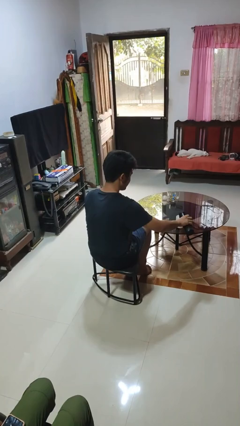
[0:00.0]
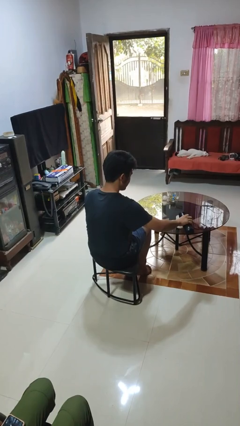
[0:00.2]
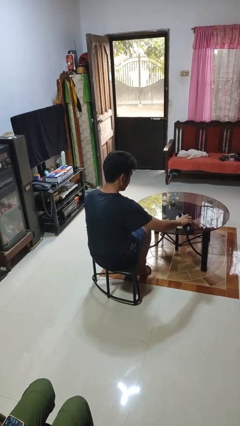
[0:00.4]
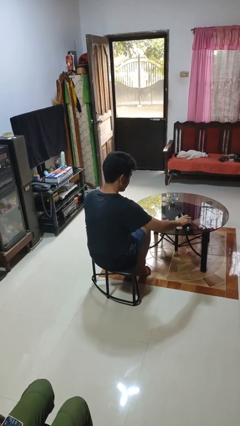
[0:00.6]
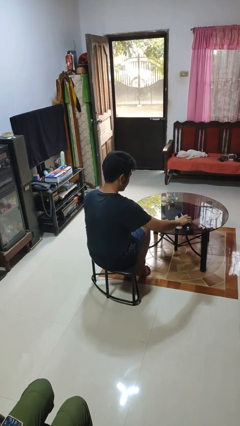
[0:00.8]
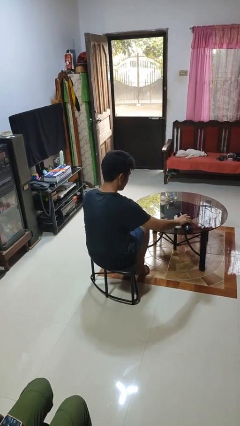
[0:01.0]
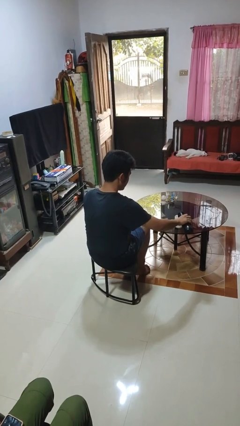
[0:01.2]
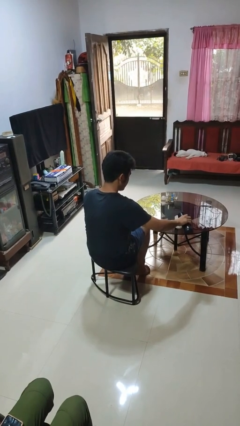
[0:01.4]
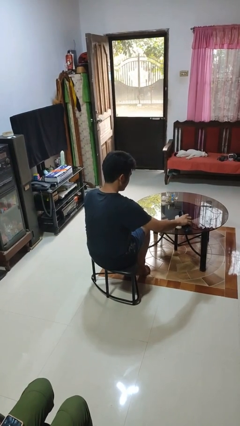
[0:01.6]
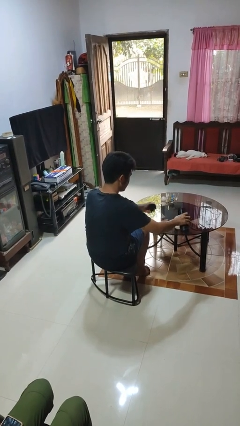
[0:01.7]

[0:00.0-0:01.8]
person pours liquid into cup

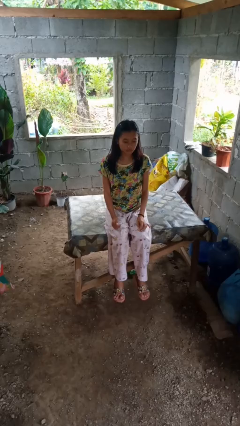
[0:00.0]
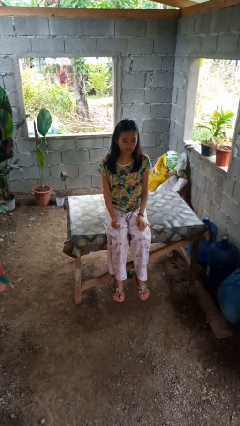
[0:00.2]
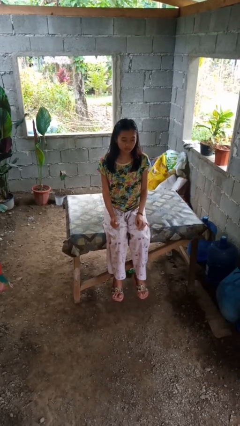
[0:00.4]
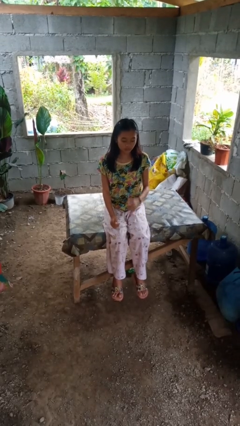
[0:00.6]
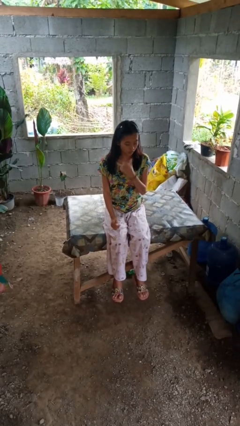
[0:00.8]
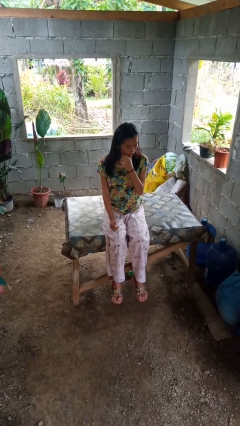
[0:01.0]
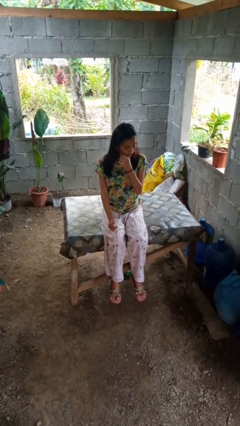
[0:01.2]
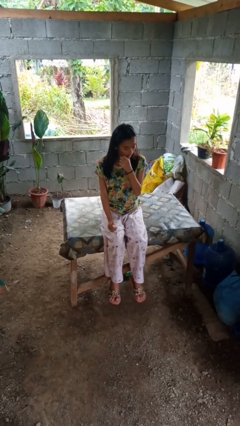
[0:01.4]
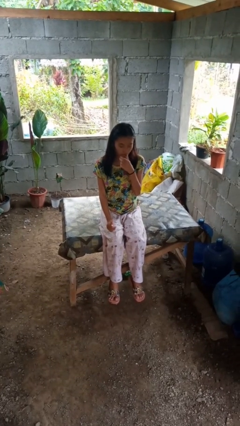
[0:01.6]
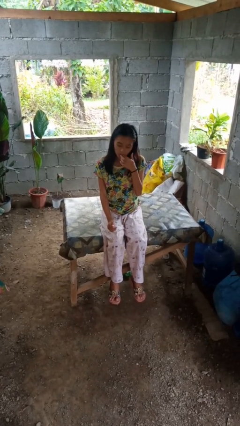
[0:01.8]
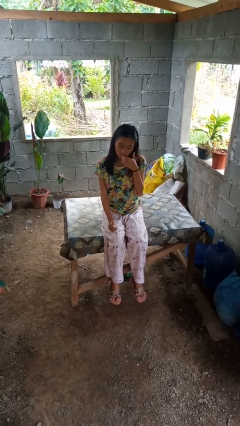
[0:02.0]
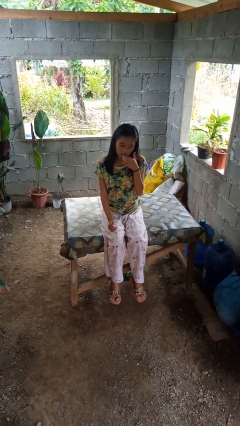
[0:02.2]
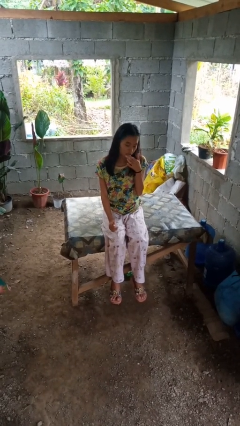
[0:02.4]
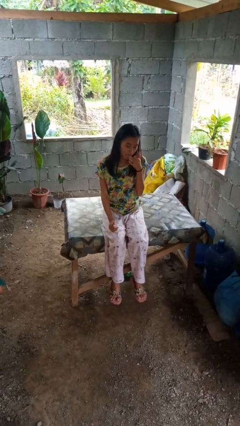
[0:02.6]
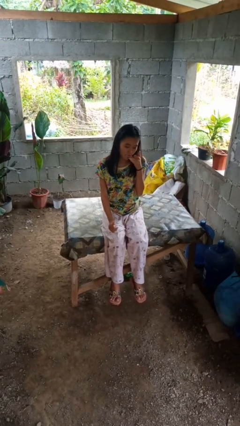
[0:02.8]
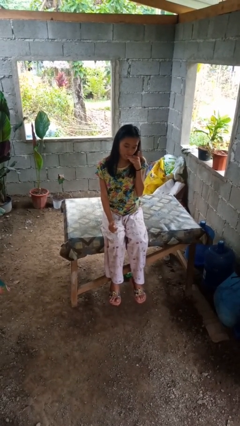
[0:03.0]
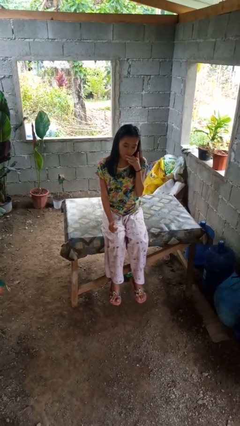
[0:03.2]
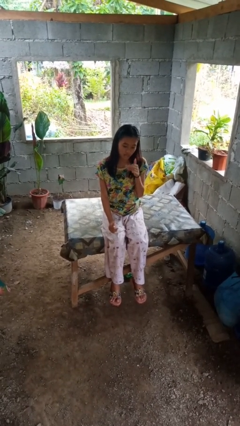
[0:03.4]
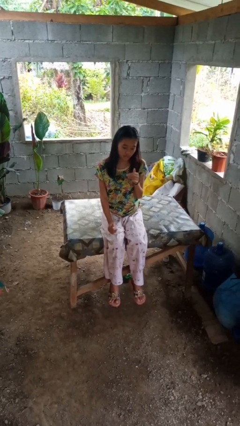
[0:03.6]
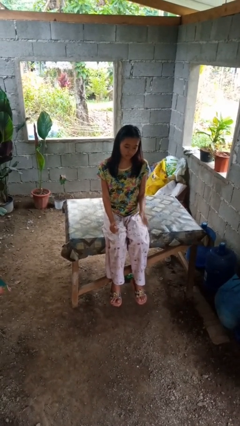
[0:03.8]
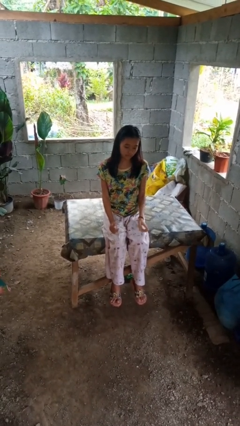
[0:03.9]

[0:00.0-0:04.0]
person licks fingers

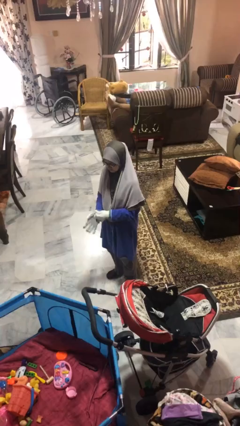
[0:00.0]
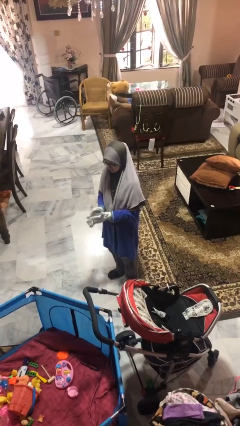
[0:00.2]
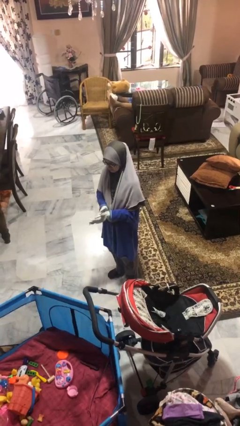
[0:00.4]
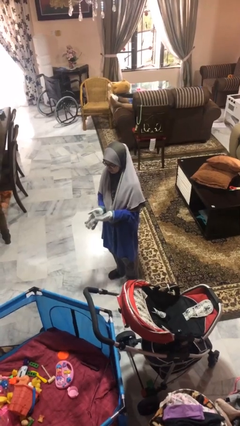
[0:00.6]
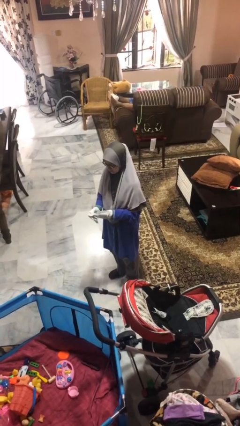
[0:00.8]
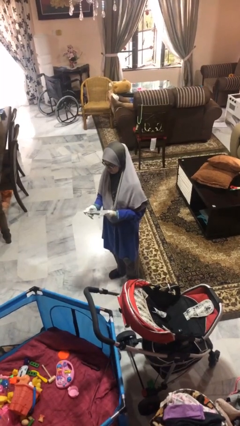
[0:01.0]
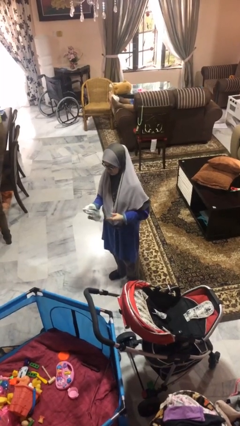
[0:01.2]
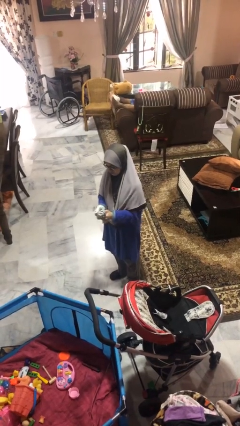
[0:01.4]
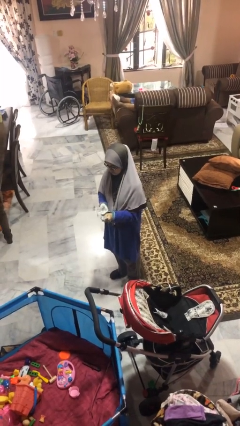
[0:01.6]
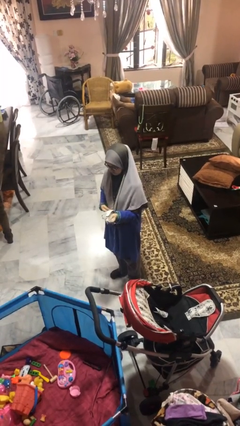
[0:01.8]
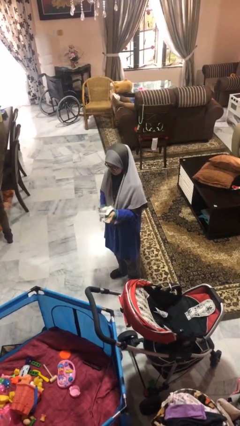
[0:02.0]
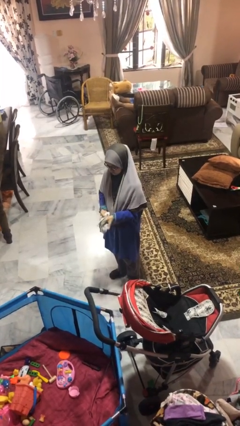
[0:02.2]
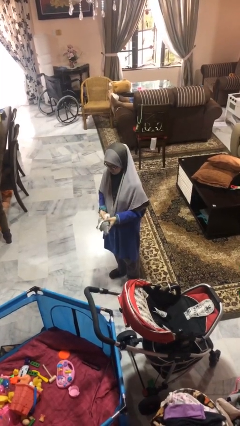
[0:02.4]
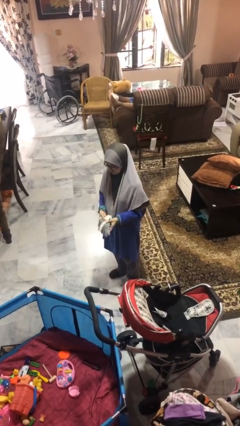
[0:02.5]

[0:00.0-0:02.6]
person takes off gloves

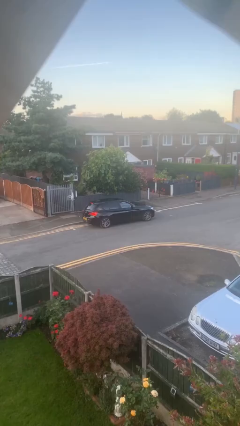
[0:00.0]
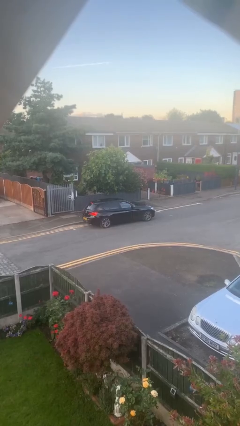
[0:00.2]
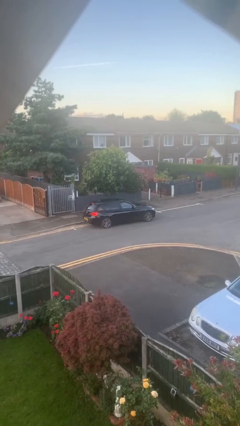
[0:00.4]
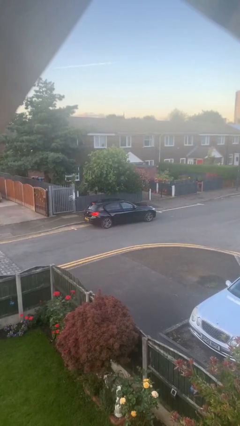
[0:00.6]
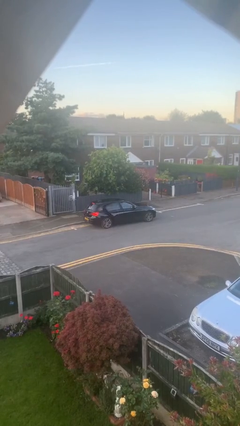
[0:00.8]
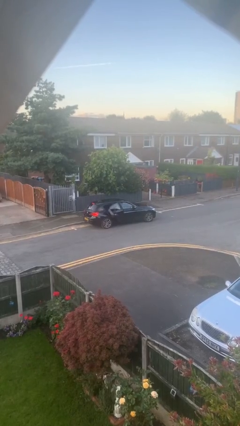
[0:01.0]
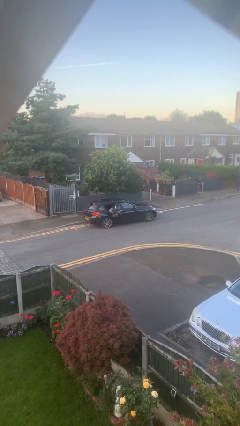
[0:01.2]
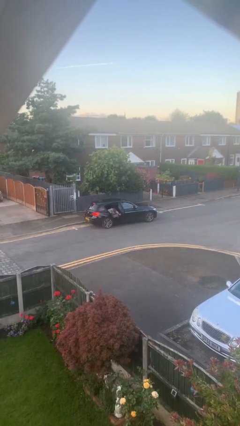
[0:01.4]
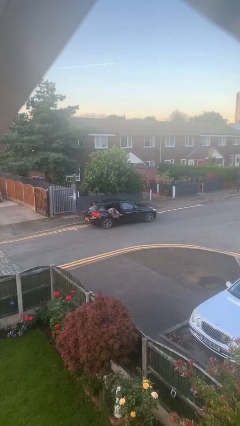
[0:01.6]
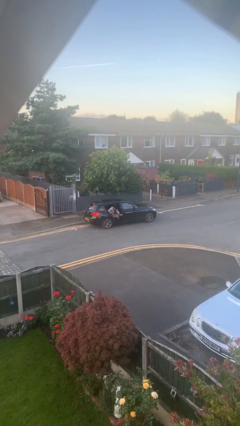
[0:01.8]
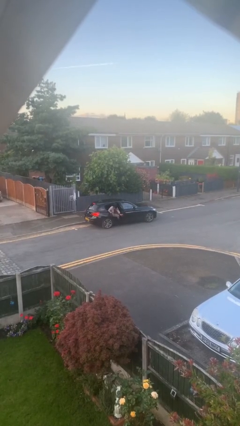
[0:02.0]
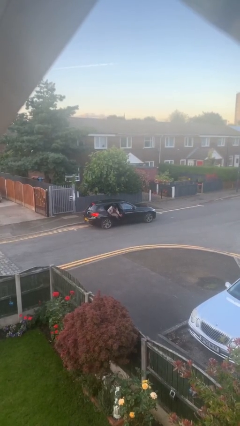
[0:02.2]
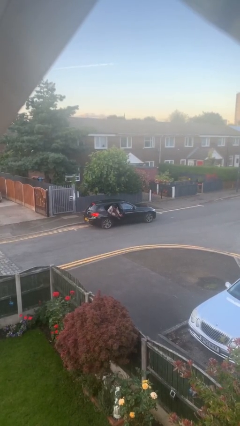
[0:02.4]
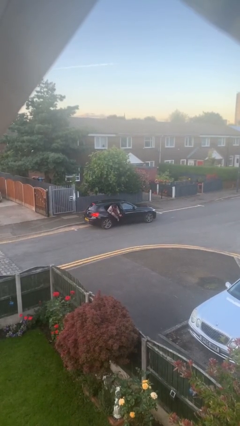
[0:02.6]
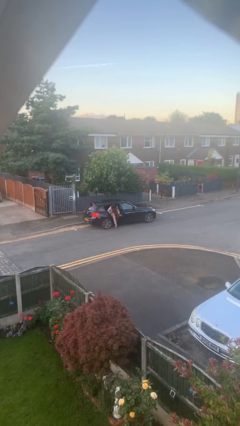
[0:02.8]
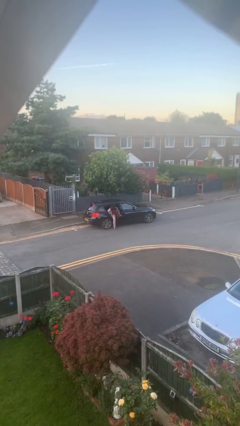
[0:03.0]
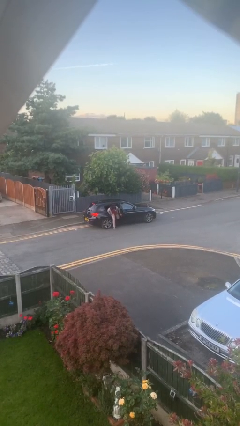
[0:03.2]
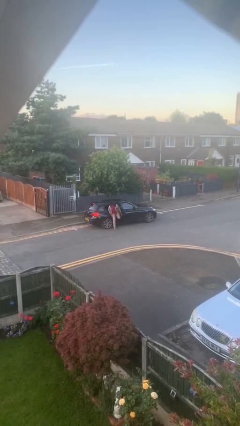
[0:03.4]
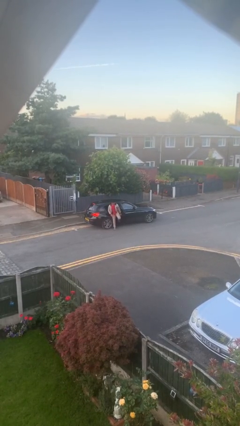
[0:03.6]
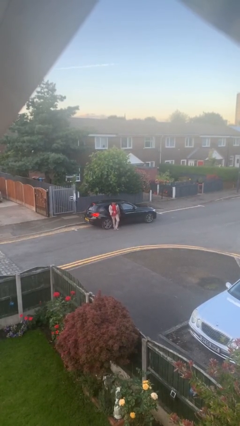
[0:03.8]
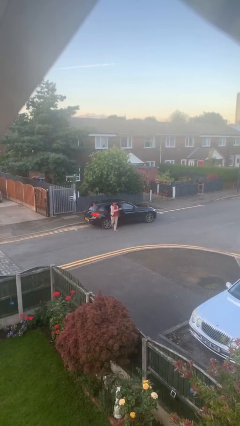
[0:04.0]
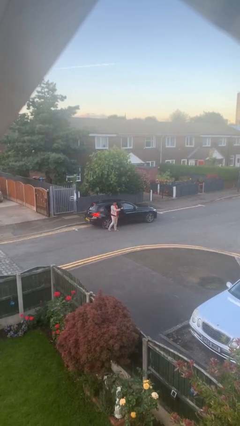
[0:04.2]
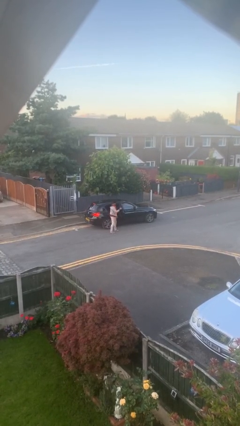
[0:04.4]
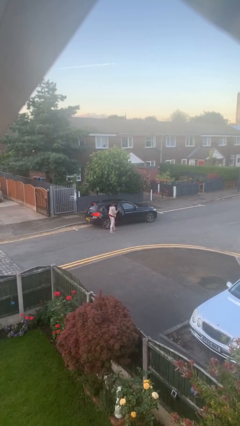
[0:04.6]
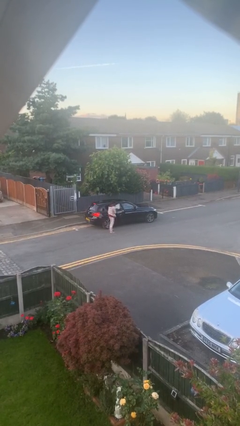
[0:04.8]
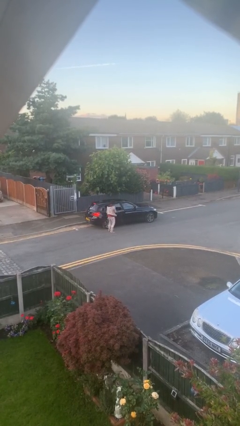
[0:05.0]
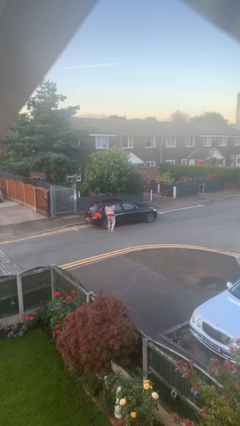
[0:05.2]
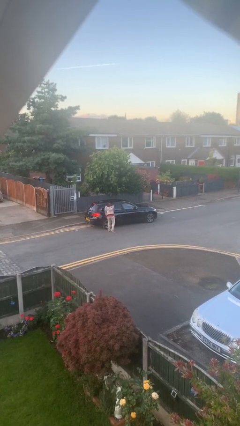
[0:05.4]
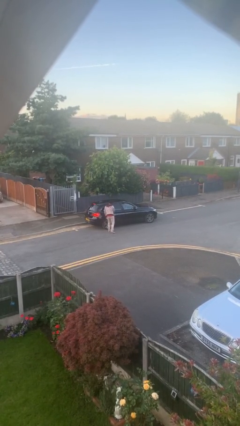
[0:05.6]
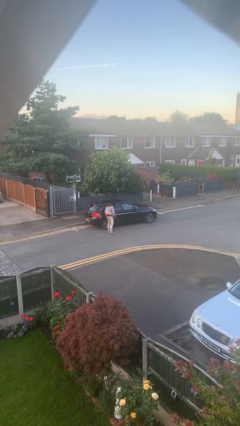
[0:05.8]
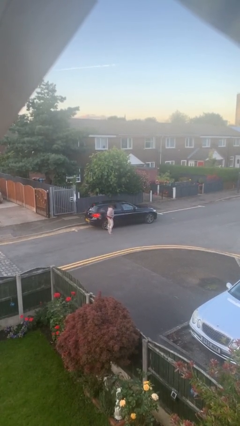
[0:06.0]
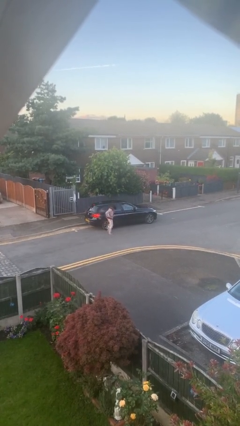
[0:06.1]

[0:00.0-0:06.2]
car drops off person

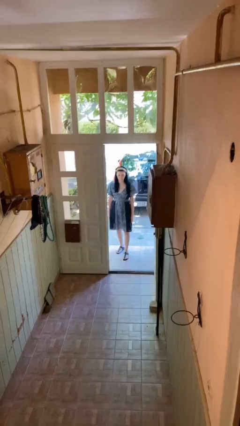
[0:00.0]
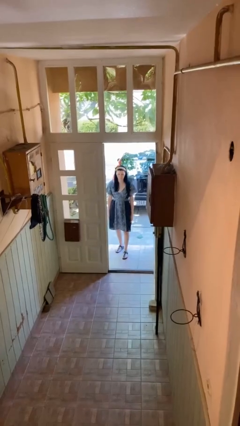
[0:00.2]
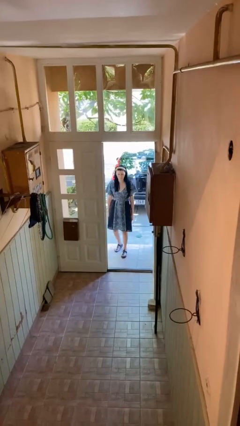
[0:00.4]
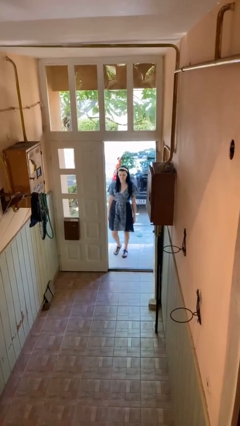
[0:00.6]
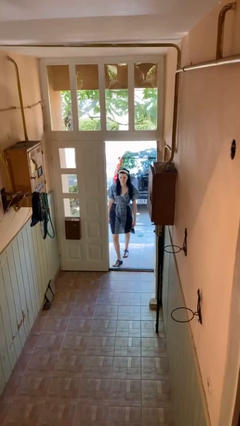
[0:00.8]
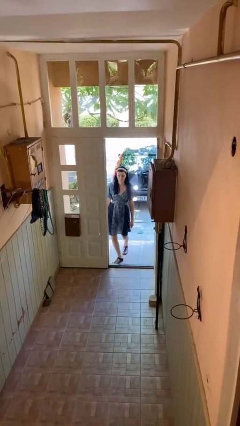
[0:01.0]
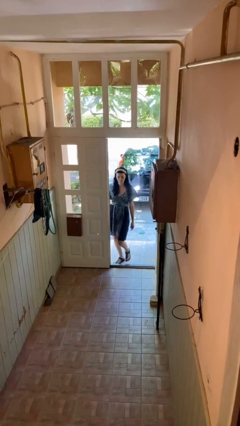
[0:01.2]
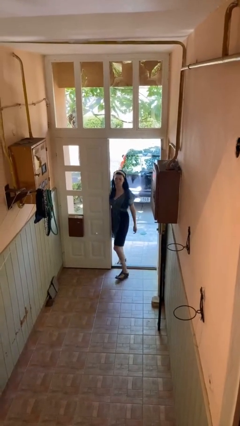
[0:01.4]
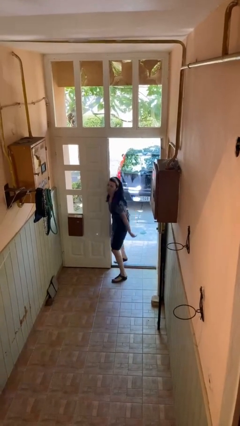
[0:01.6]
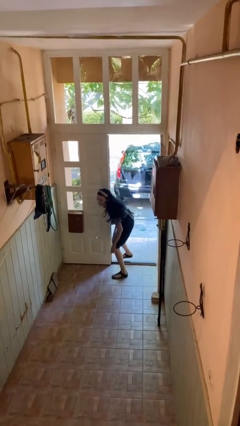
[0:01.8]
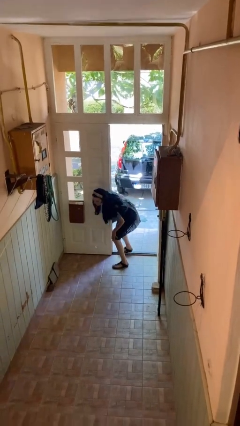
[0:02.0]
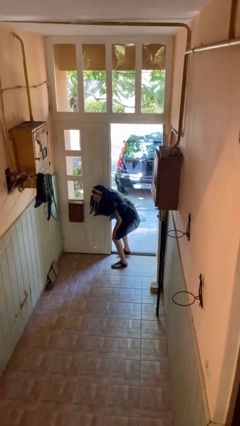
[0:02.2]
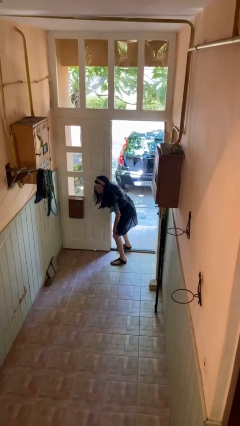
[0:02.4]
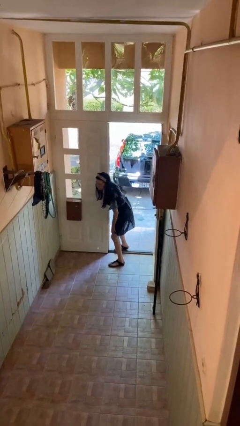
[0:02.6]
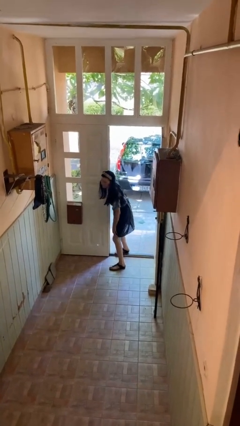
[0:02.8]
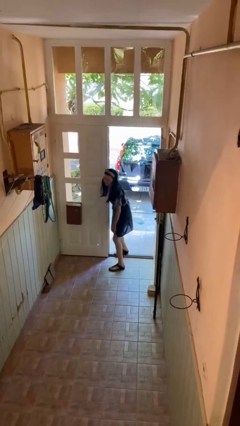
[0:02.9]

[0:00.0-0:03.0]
person bumps into wall

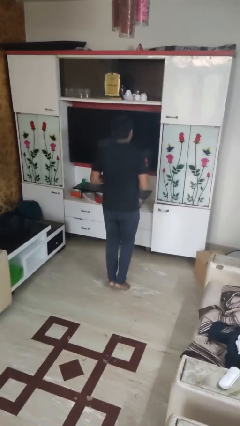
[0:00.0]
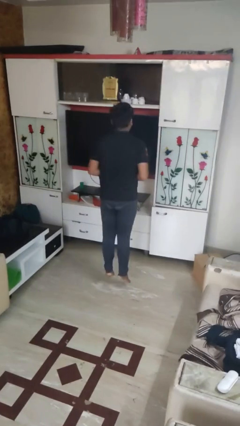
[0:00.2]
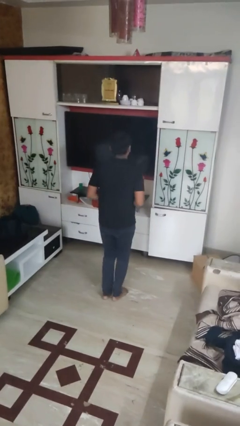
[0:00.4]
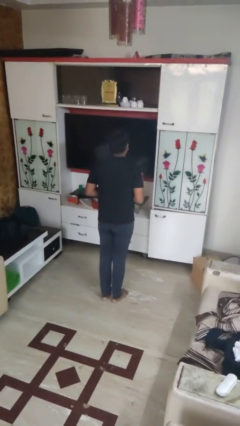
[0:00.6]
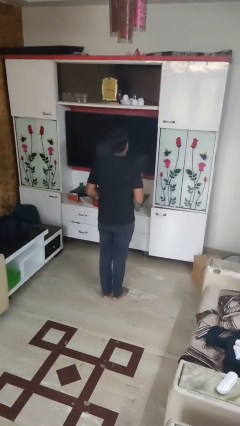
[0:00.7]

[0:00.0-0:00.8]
person jumps
